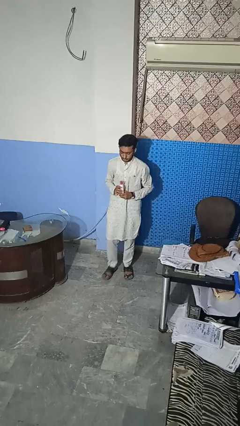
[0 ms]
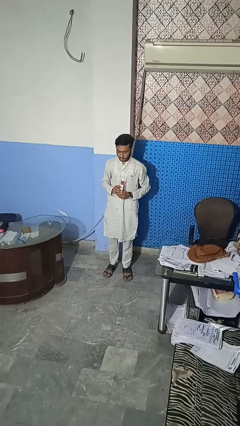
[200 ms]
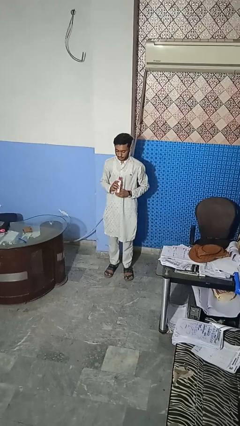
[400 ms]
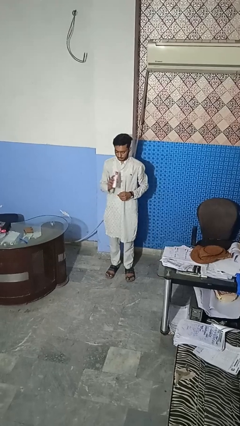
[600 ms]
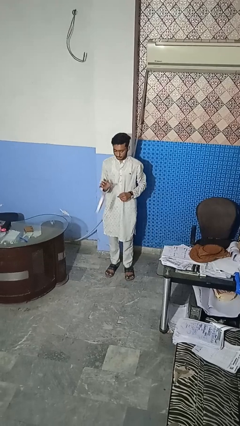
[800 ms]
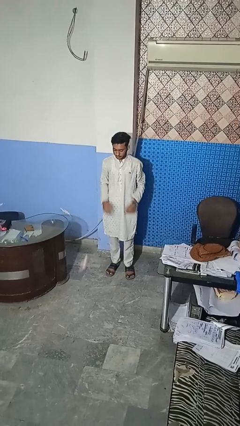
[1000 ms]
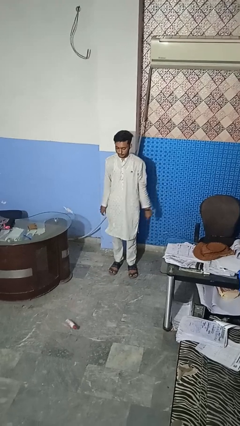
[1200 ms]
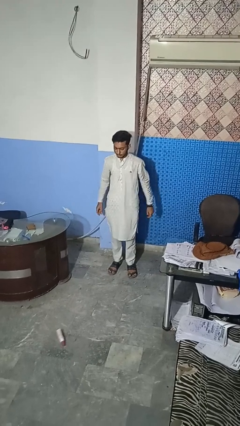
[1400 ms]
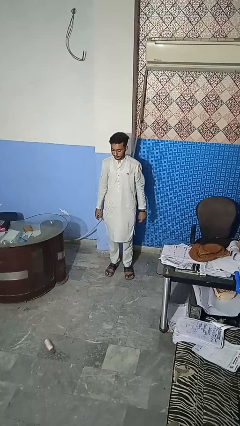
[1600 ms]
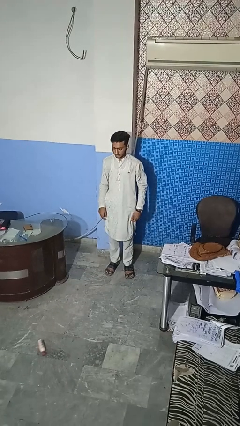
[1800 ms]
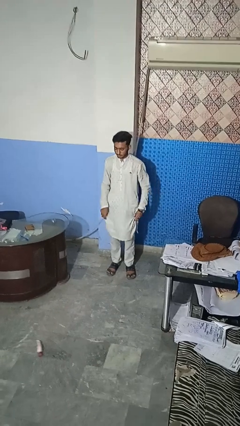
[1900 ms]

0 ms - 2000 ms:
person throws object to ground

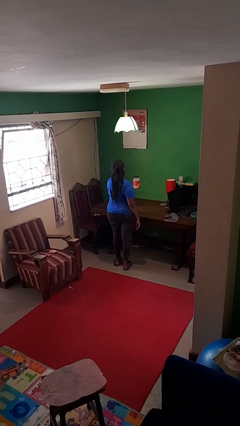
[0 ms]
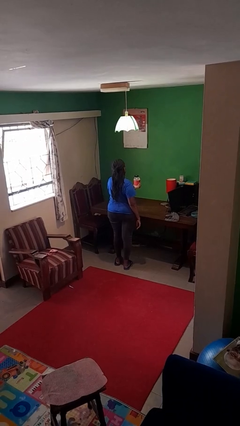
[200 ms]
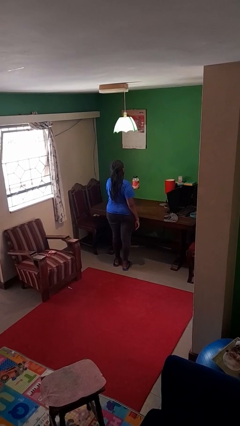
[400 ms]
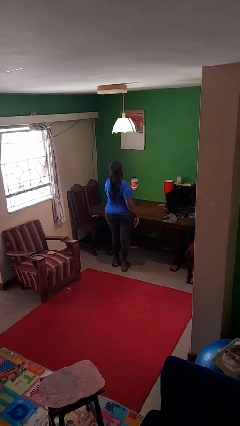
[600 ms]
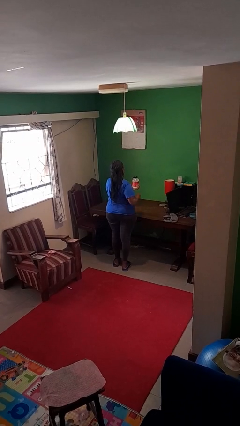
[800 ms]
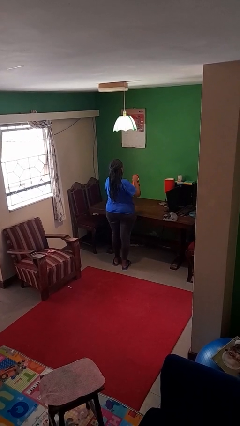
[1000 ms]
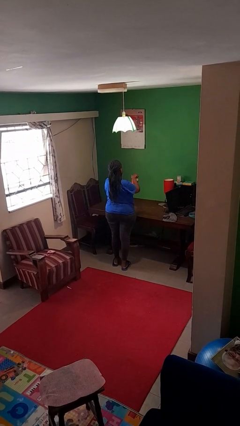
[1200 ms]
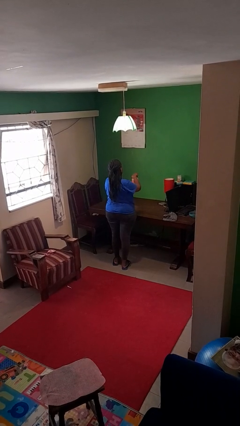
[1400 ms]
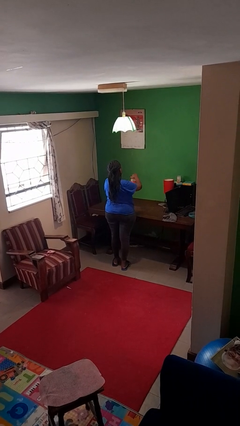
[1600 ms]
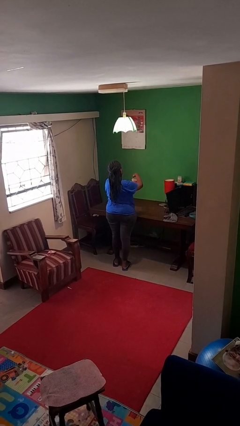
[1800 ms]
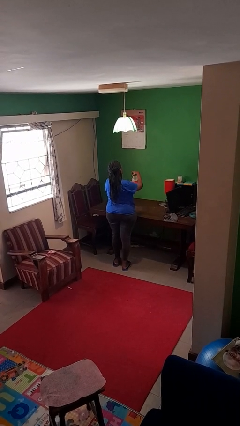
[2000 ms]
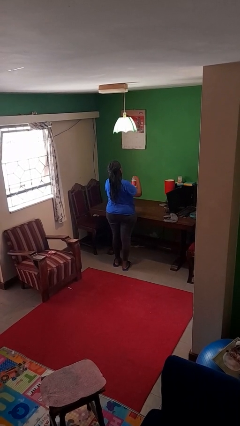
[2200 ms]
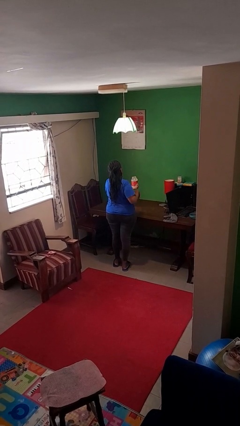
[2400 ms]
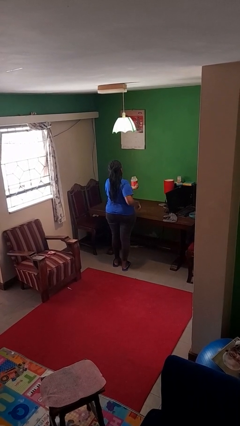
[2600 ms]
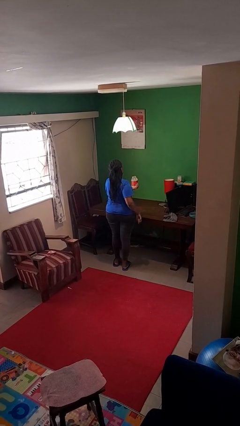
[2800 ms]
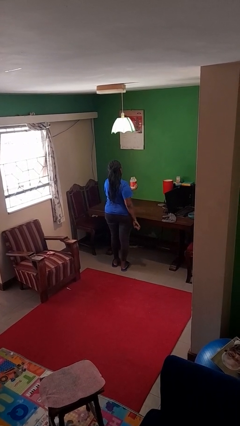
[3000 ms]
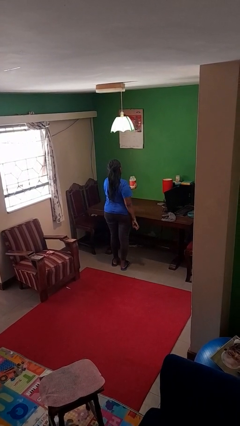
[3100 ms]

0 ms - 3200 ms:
person opens jar

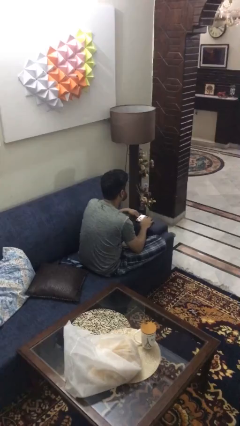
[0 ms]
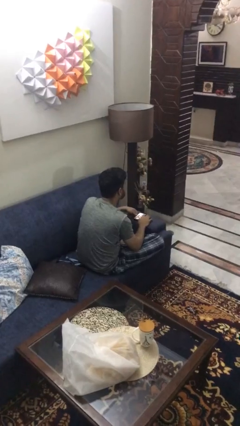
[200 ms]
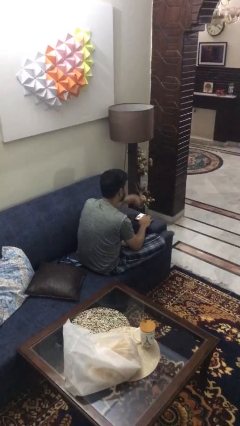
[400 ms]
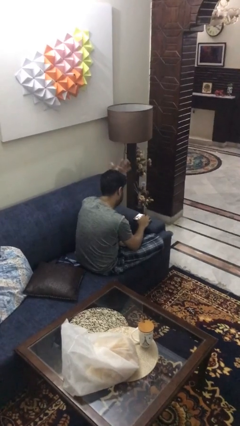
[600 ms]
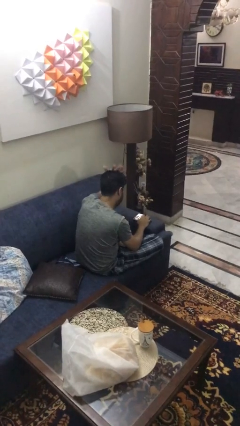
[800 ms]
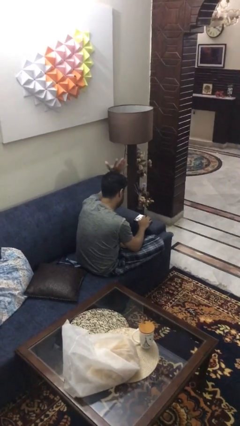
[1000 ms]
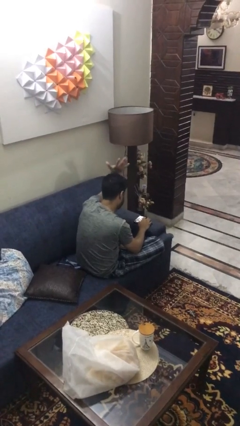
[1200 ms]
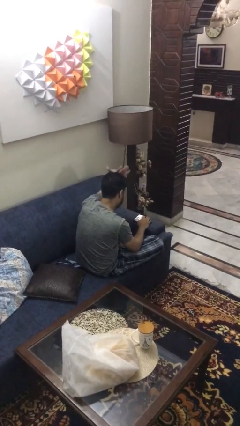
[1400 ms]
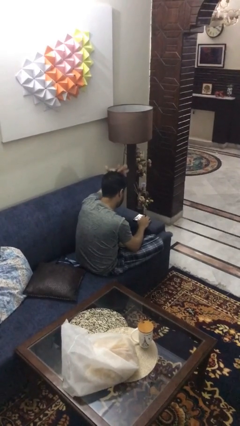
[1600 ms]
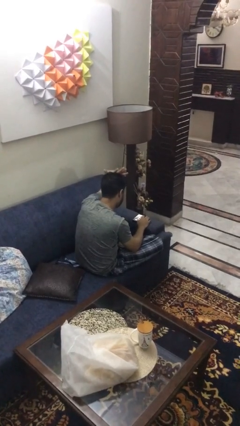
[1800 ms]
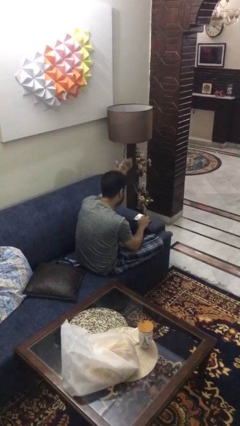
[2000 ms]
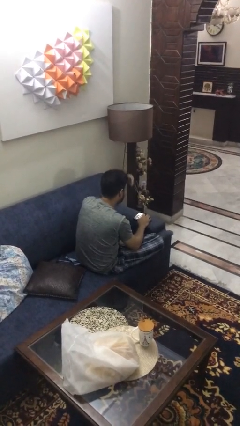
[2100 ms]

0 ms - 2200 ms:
person pats head

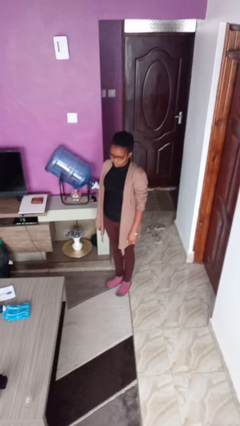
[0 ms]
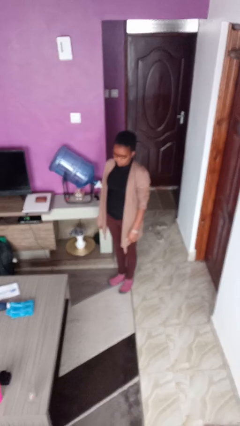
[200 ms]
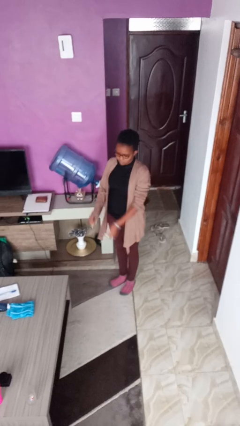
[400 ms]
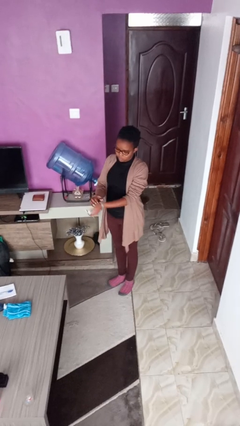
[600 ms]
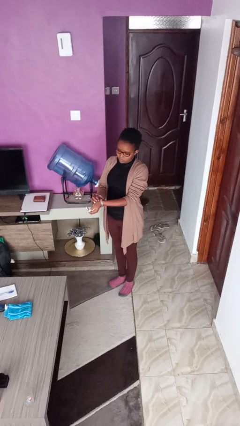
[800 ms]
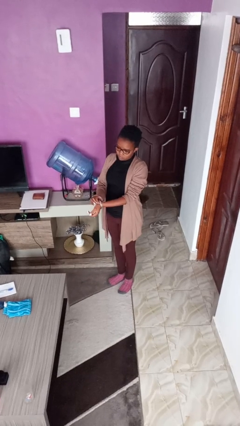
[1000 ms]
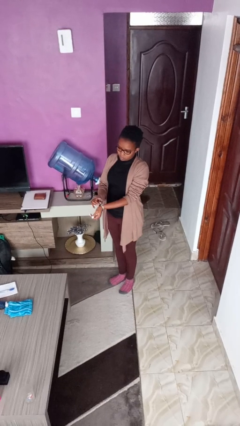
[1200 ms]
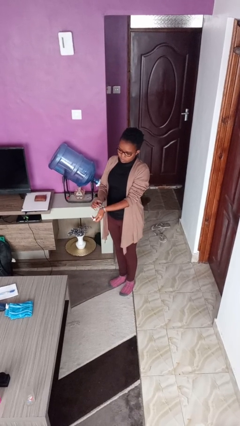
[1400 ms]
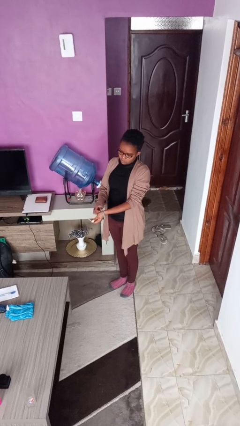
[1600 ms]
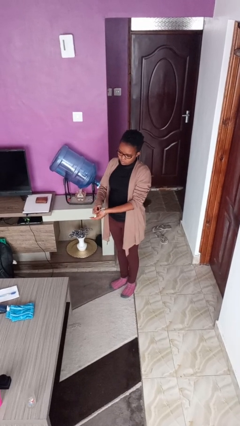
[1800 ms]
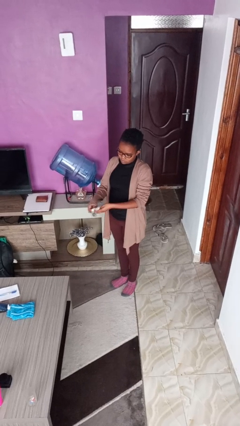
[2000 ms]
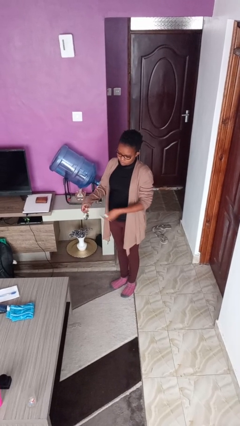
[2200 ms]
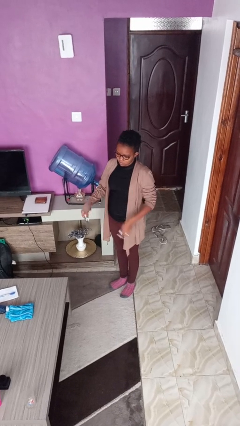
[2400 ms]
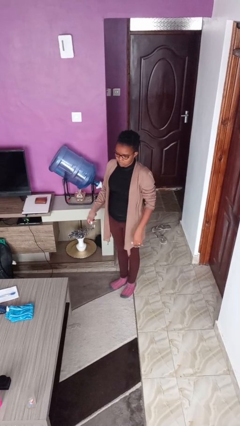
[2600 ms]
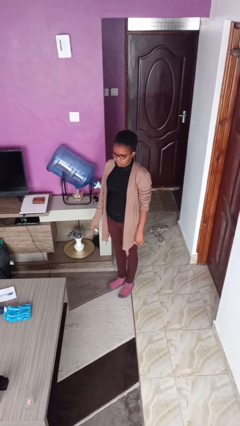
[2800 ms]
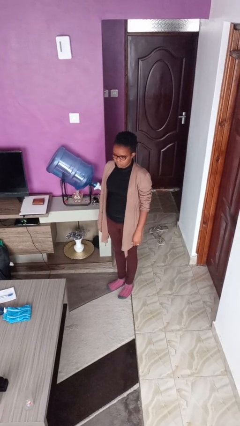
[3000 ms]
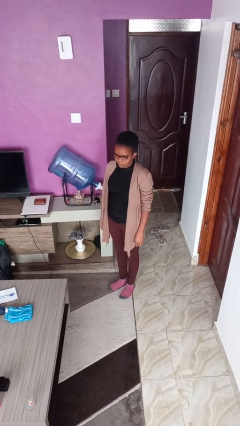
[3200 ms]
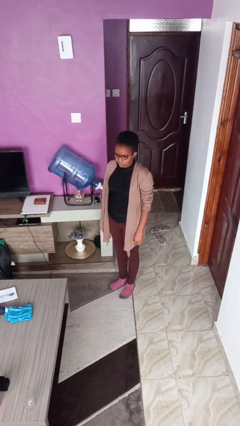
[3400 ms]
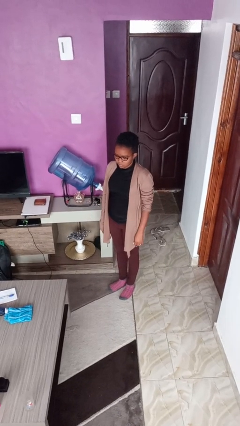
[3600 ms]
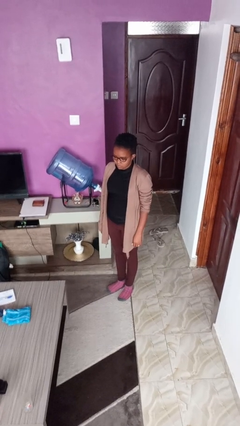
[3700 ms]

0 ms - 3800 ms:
person takes off wristwatch

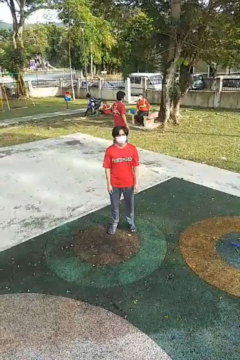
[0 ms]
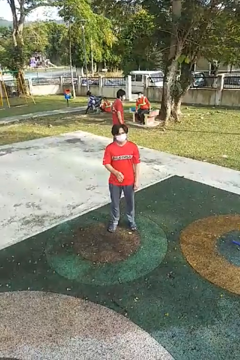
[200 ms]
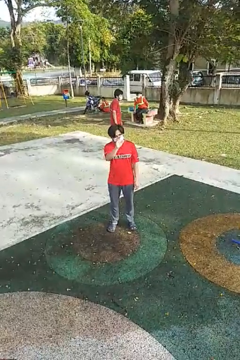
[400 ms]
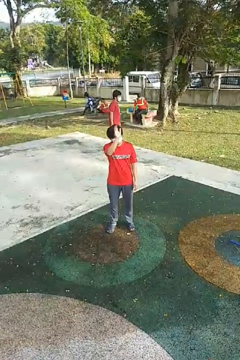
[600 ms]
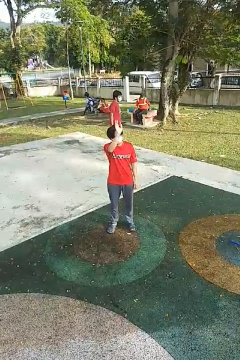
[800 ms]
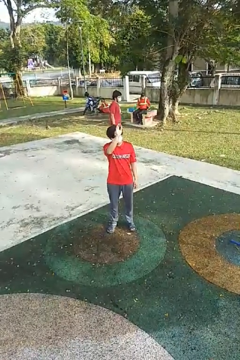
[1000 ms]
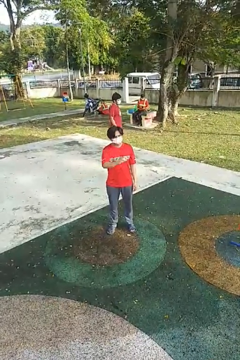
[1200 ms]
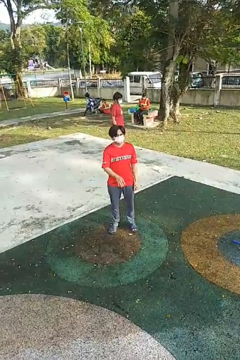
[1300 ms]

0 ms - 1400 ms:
person waves at person

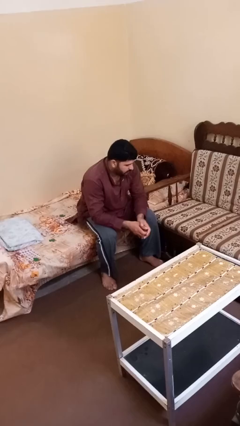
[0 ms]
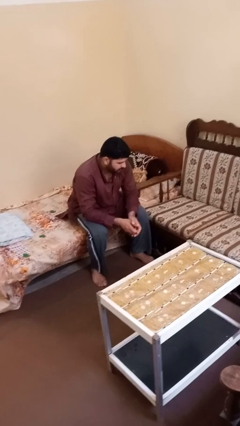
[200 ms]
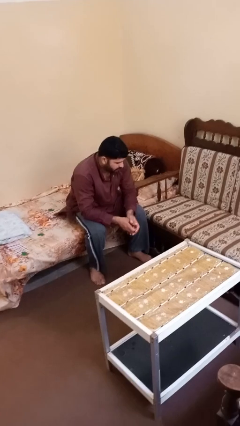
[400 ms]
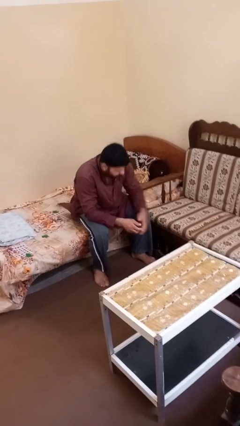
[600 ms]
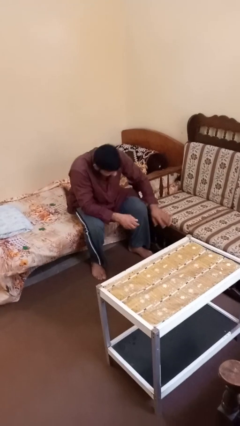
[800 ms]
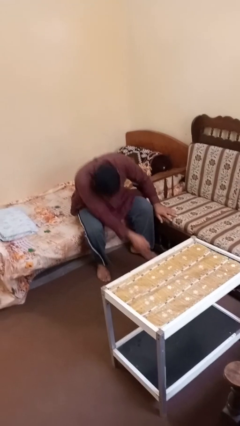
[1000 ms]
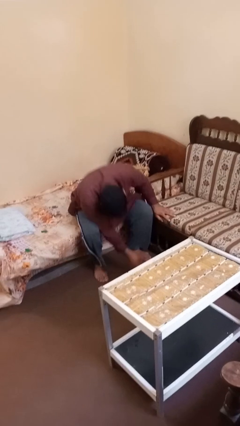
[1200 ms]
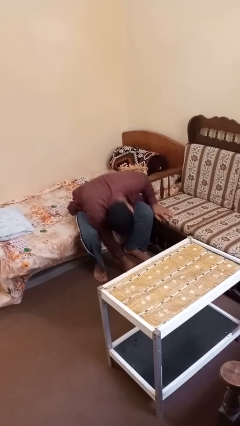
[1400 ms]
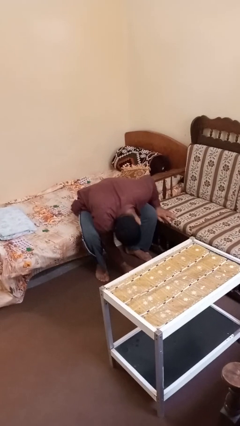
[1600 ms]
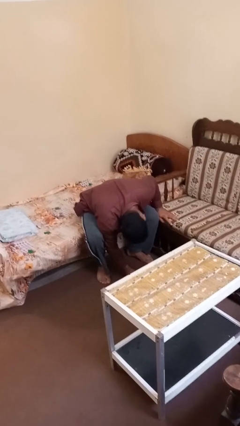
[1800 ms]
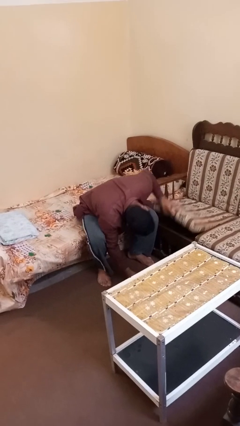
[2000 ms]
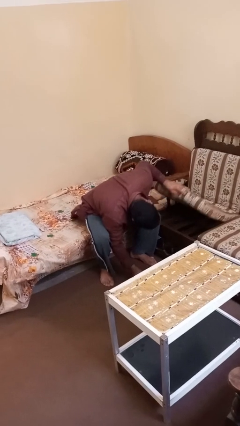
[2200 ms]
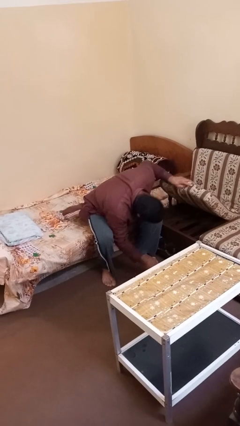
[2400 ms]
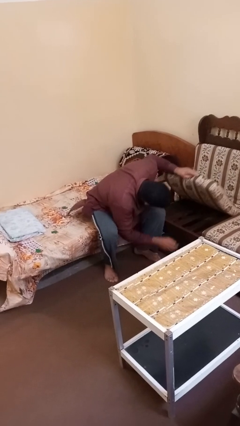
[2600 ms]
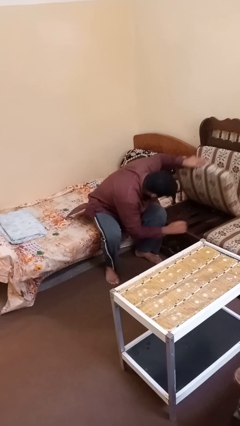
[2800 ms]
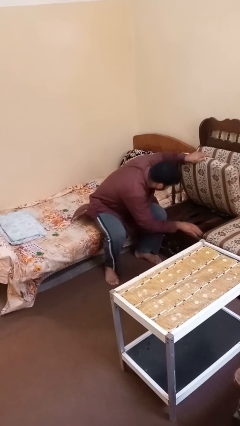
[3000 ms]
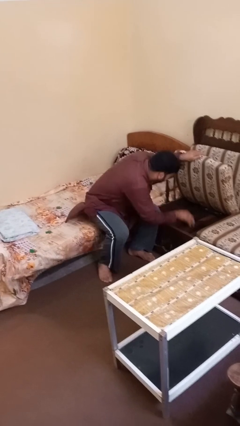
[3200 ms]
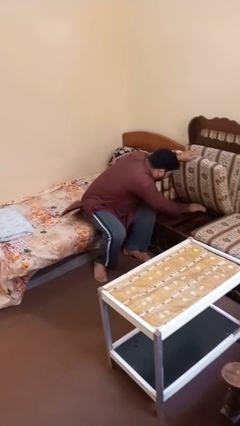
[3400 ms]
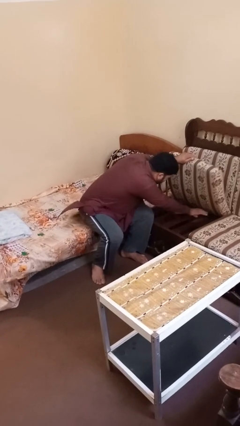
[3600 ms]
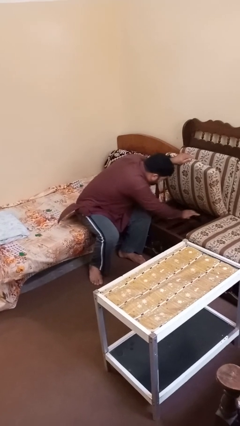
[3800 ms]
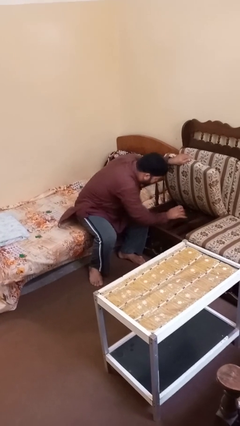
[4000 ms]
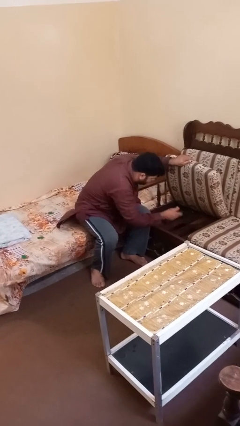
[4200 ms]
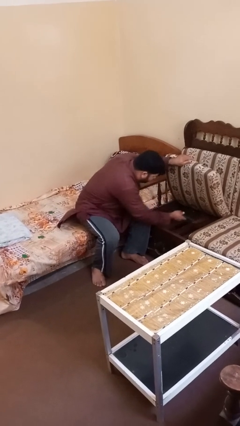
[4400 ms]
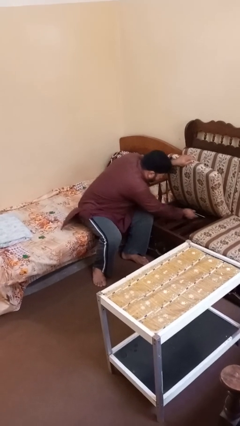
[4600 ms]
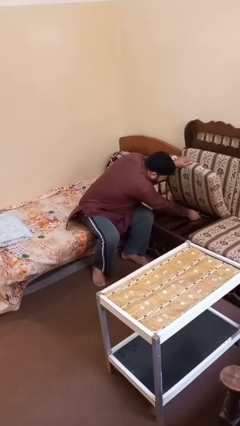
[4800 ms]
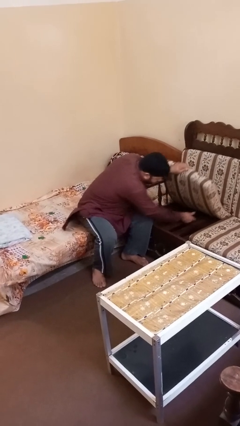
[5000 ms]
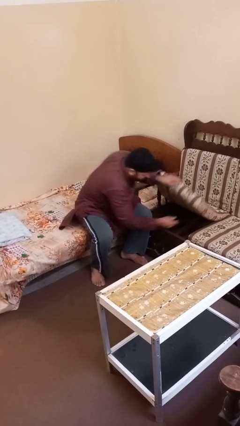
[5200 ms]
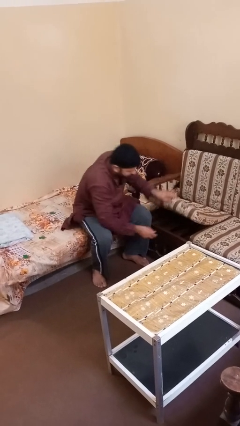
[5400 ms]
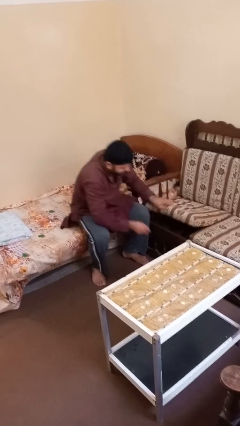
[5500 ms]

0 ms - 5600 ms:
person searches under couch
